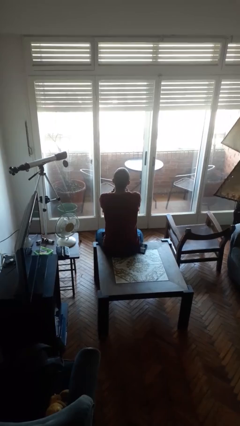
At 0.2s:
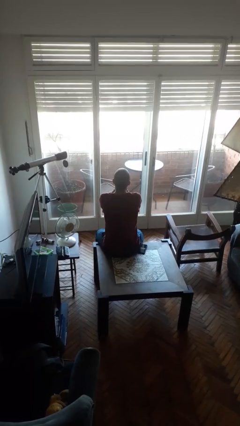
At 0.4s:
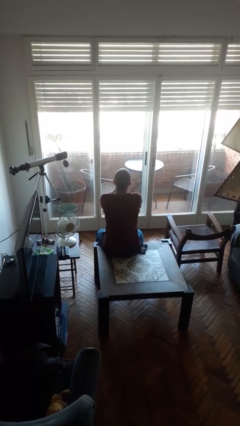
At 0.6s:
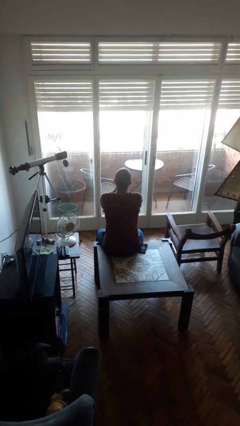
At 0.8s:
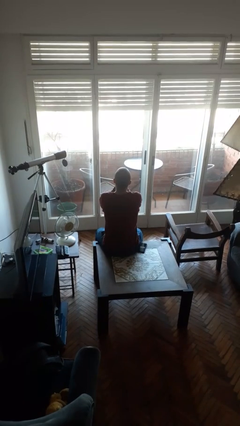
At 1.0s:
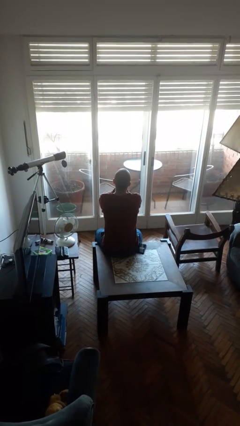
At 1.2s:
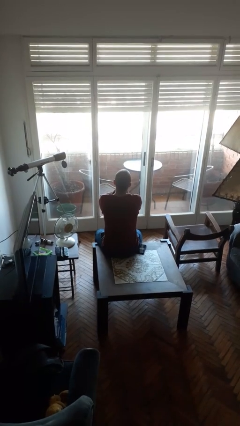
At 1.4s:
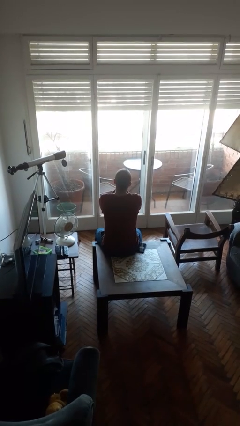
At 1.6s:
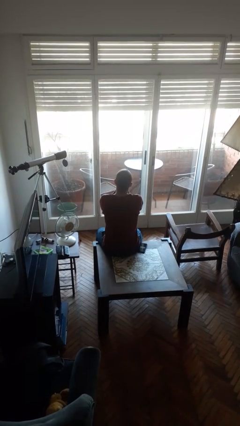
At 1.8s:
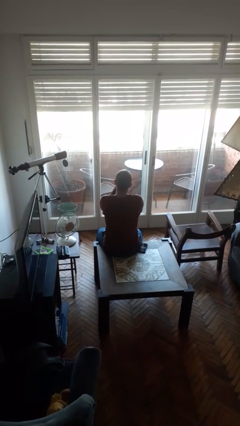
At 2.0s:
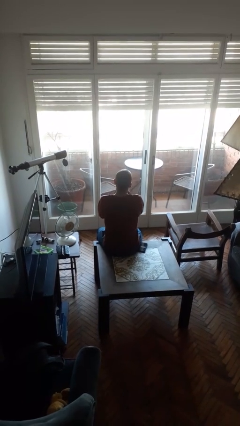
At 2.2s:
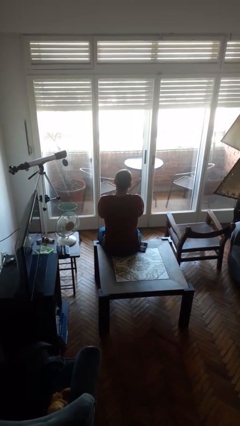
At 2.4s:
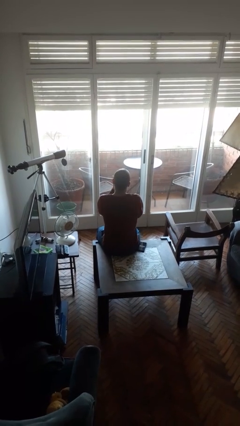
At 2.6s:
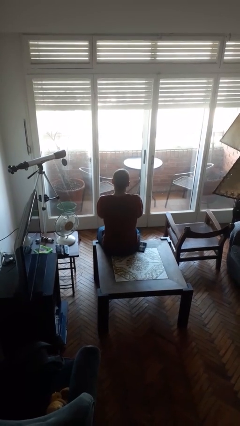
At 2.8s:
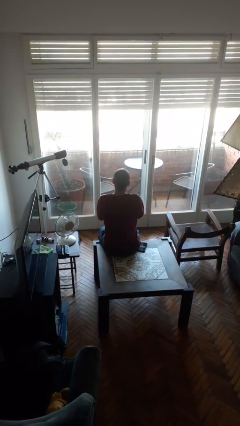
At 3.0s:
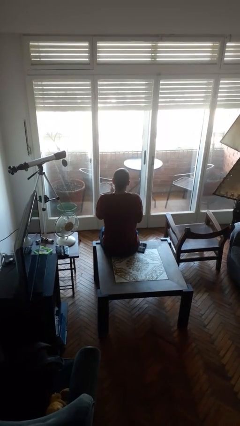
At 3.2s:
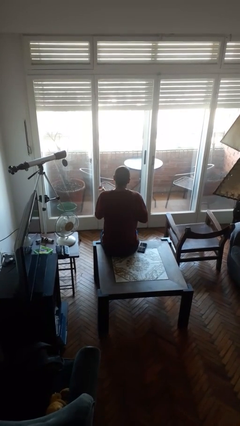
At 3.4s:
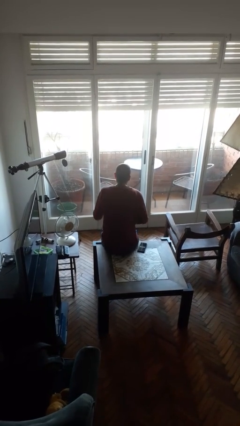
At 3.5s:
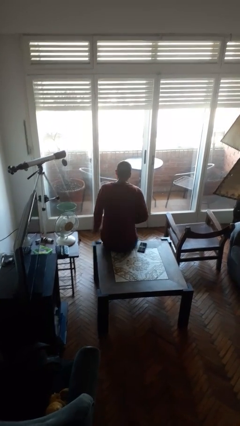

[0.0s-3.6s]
person blows into hands

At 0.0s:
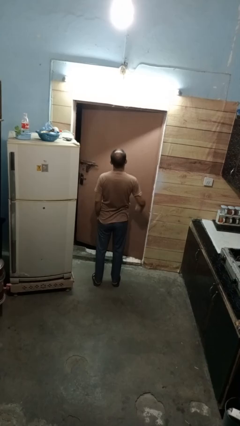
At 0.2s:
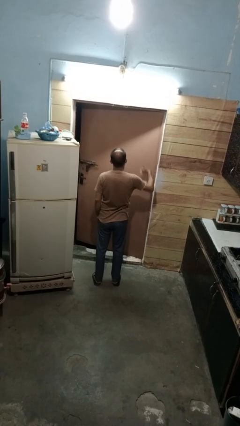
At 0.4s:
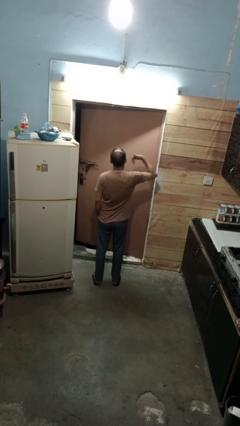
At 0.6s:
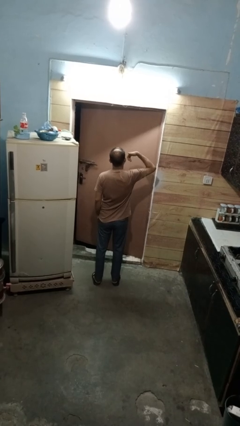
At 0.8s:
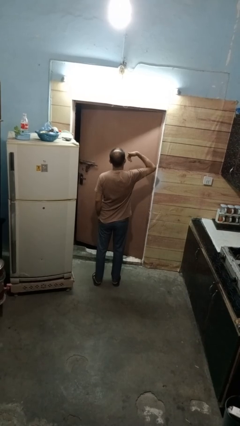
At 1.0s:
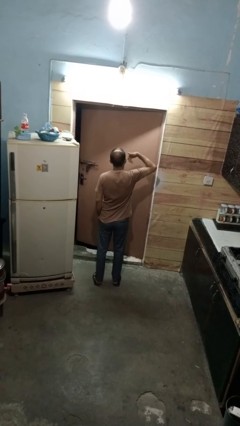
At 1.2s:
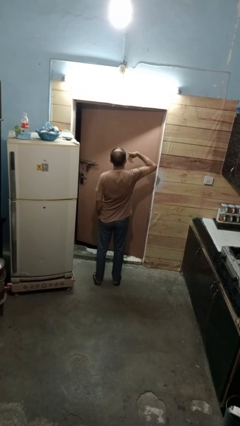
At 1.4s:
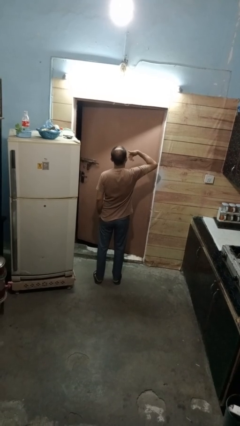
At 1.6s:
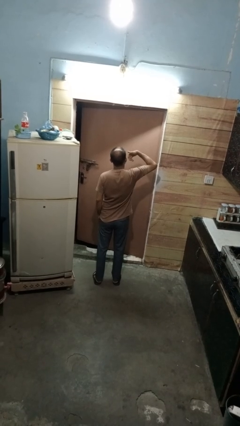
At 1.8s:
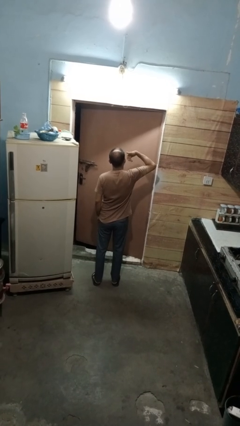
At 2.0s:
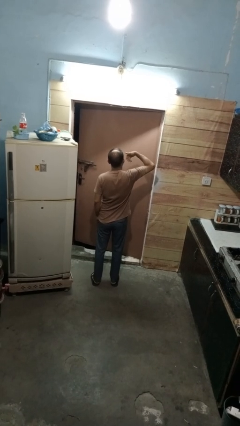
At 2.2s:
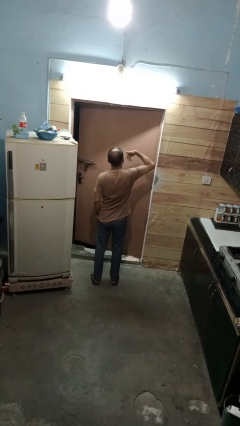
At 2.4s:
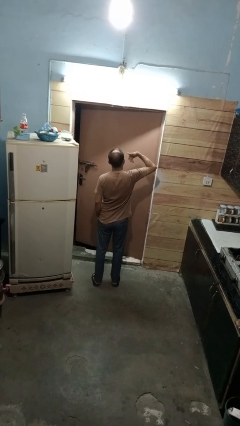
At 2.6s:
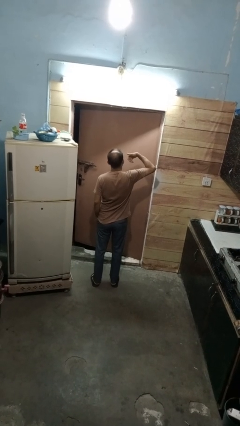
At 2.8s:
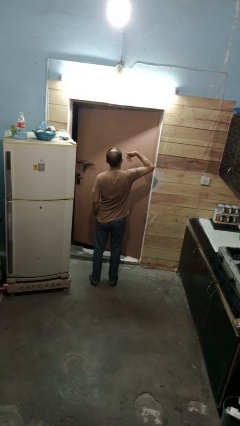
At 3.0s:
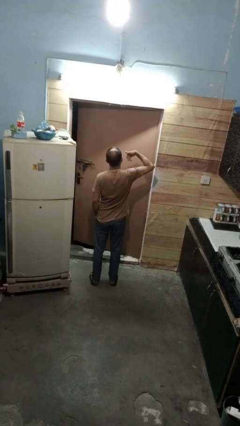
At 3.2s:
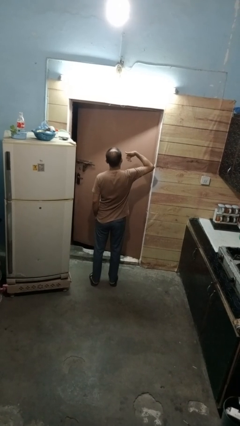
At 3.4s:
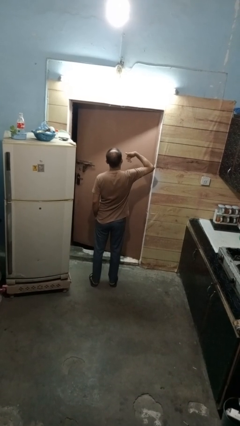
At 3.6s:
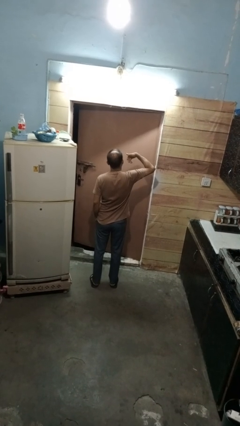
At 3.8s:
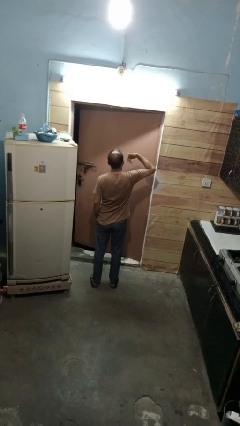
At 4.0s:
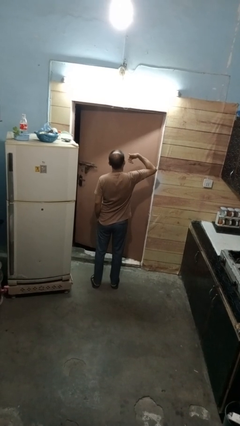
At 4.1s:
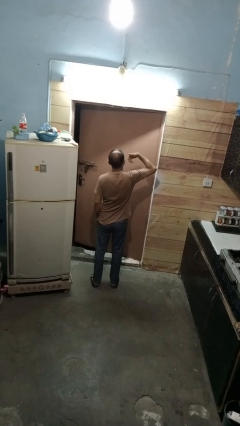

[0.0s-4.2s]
person gestures call me

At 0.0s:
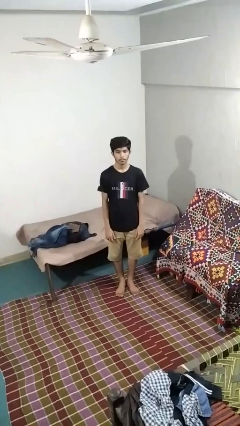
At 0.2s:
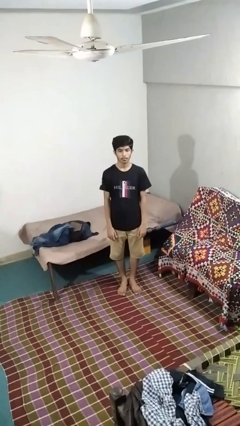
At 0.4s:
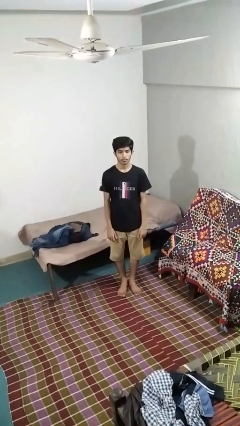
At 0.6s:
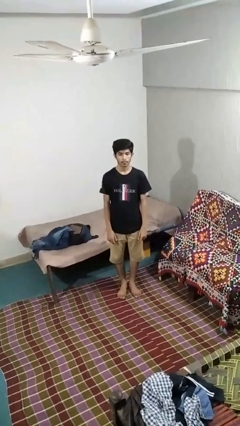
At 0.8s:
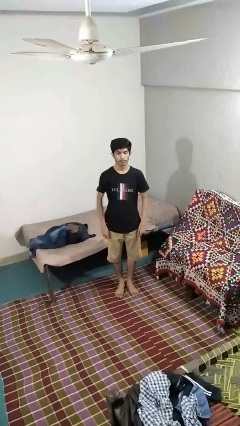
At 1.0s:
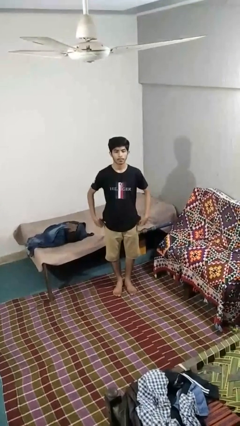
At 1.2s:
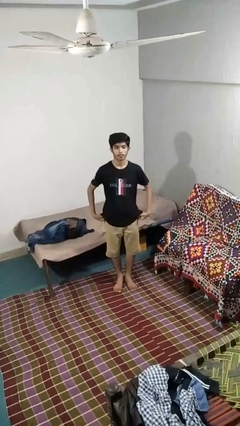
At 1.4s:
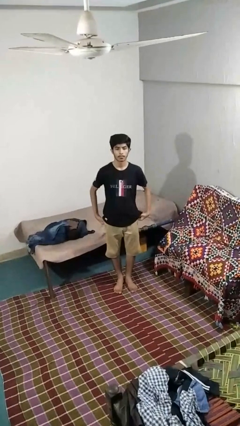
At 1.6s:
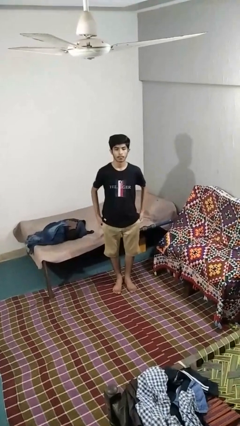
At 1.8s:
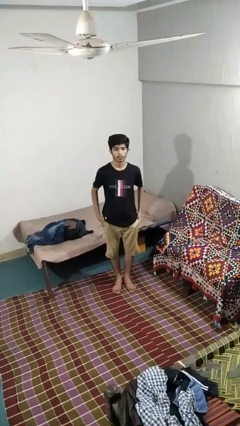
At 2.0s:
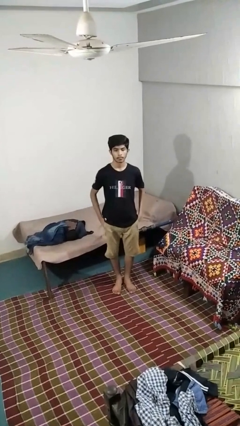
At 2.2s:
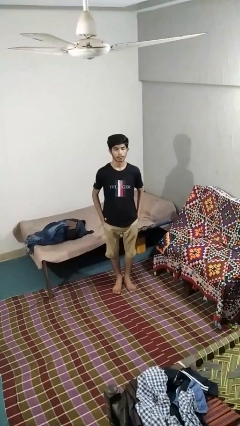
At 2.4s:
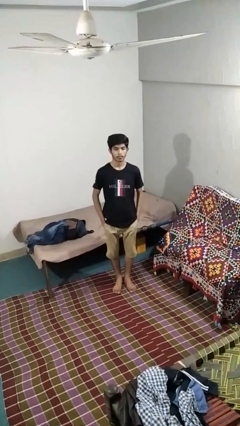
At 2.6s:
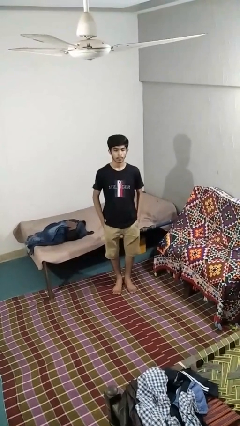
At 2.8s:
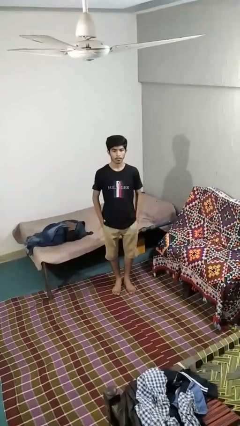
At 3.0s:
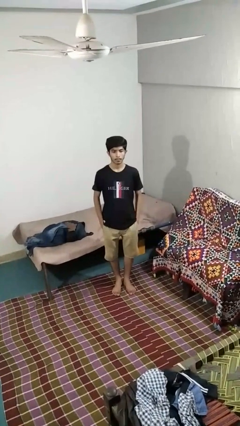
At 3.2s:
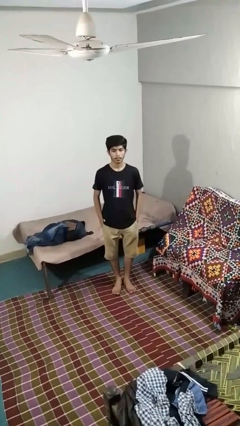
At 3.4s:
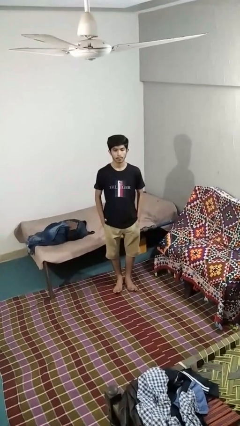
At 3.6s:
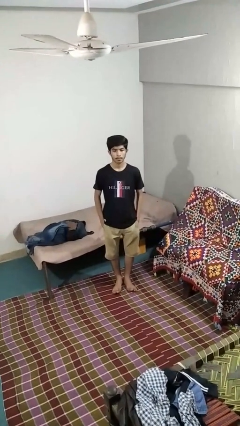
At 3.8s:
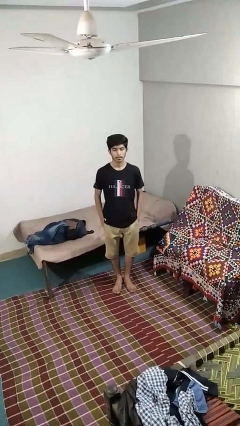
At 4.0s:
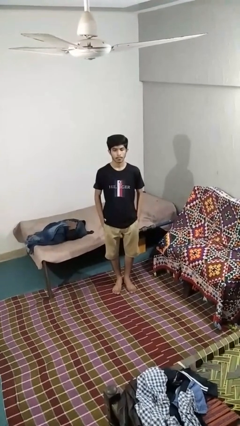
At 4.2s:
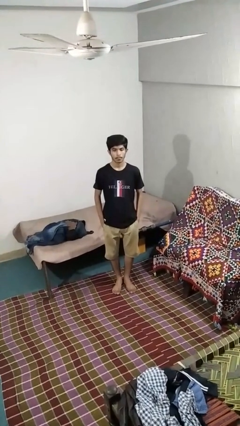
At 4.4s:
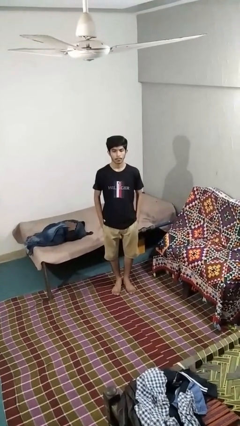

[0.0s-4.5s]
person puts hands in back pockets

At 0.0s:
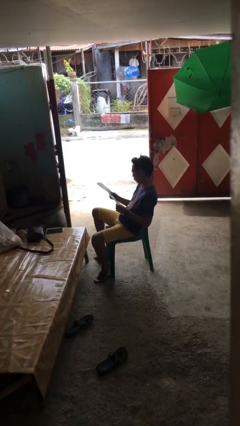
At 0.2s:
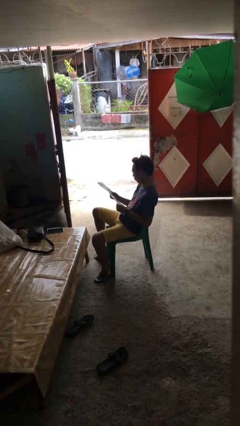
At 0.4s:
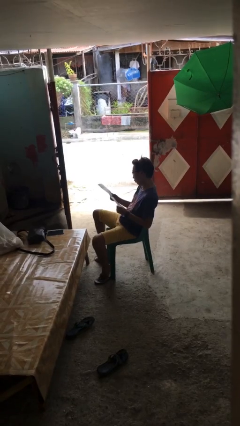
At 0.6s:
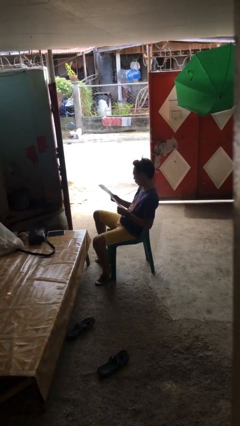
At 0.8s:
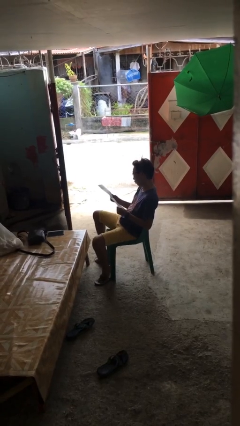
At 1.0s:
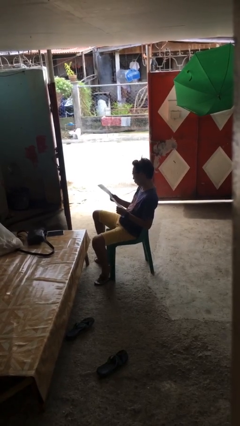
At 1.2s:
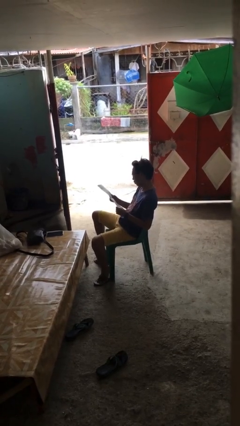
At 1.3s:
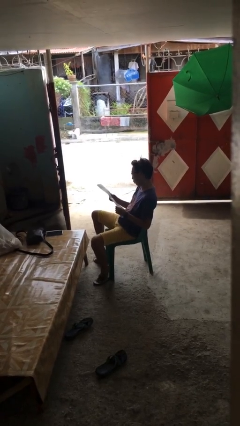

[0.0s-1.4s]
person reads document

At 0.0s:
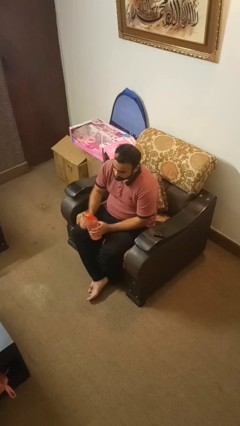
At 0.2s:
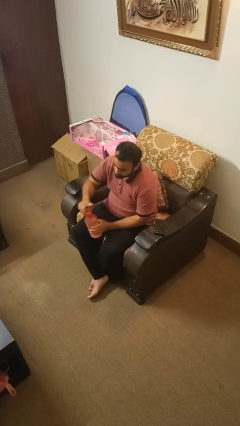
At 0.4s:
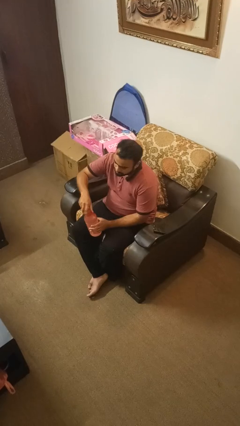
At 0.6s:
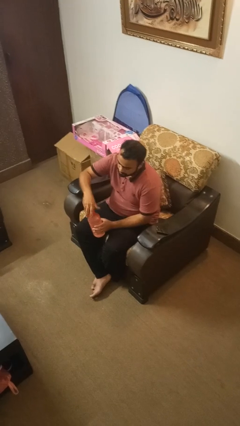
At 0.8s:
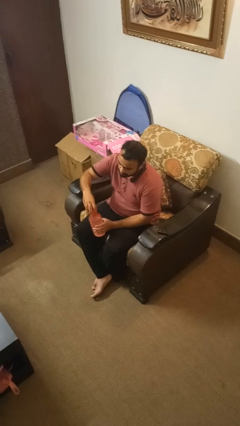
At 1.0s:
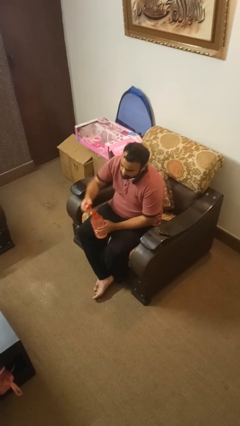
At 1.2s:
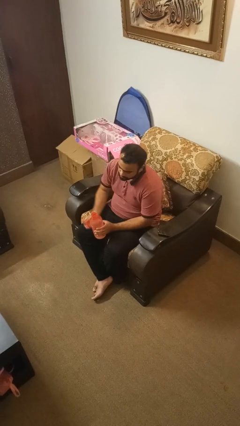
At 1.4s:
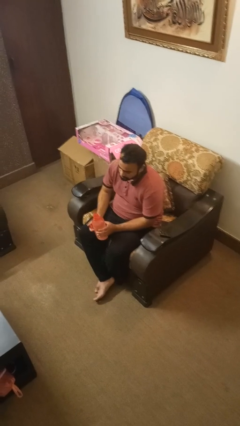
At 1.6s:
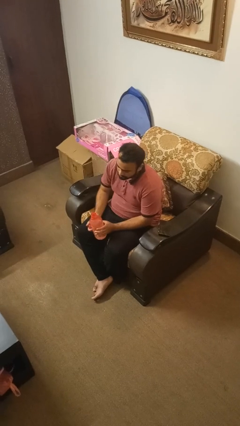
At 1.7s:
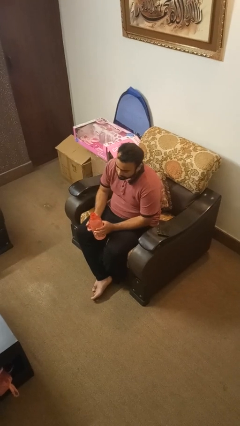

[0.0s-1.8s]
person unscrews lid from bottle

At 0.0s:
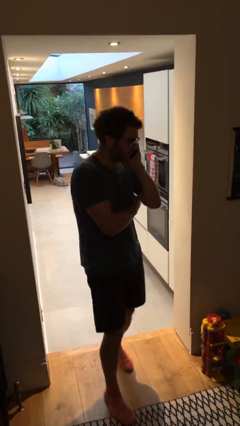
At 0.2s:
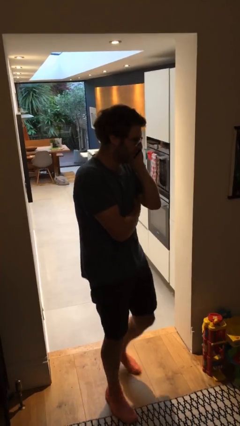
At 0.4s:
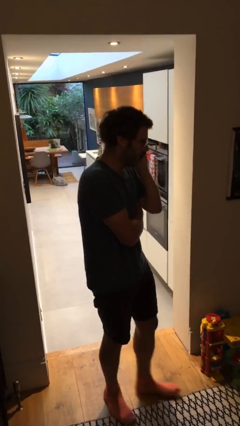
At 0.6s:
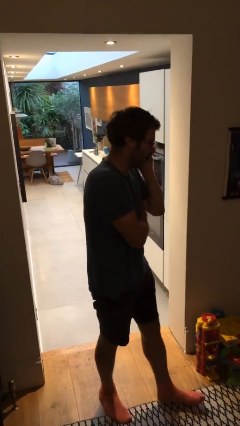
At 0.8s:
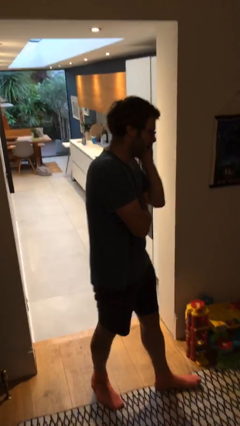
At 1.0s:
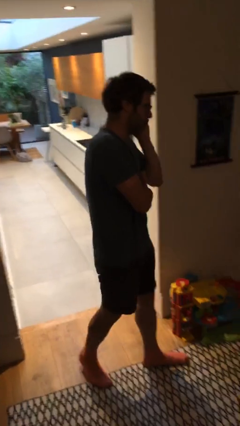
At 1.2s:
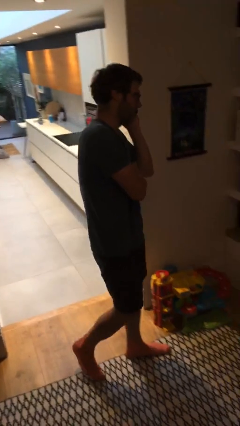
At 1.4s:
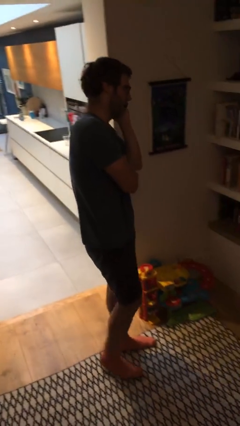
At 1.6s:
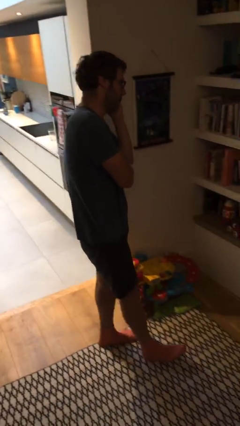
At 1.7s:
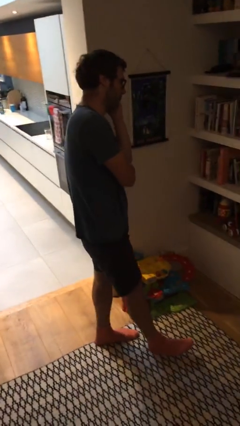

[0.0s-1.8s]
person enters scene through structure

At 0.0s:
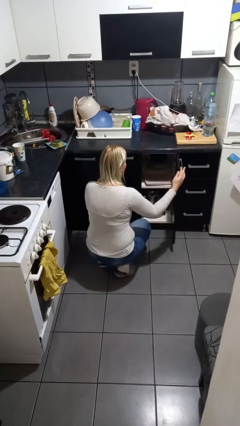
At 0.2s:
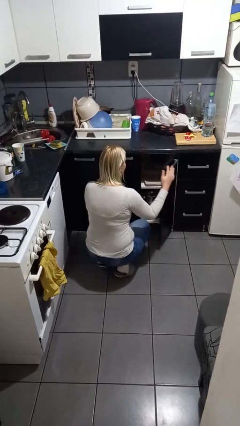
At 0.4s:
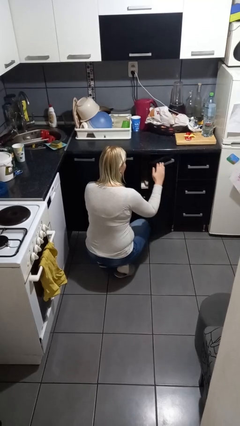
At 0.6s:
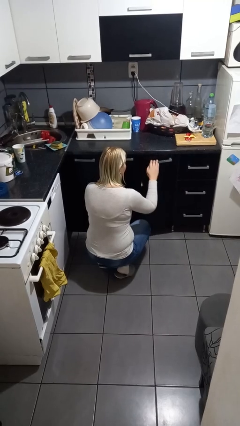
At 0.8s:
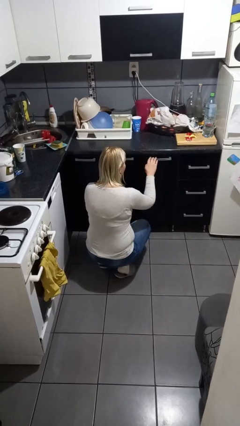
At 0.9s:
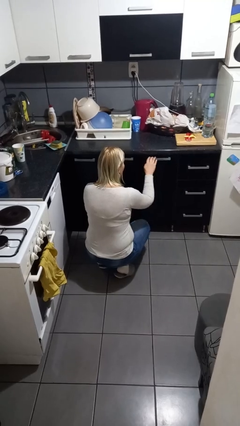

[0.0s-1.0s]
person closes cabinet
